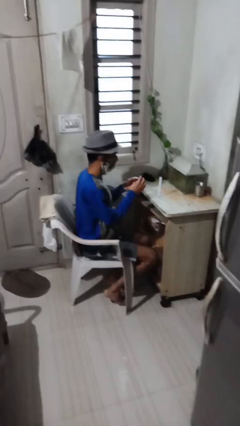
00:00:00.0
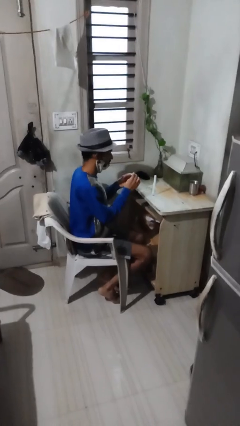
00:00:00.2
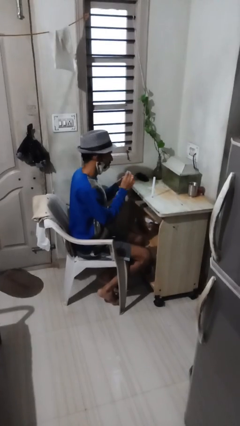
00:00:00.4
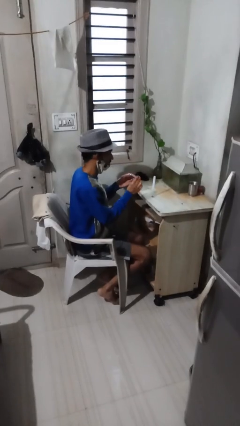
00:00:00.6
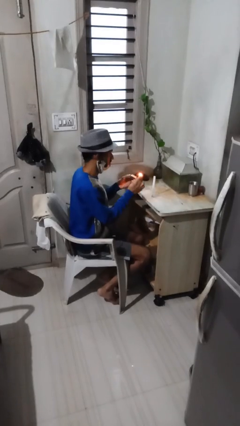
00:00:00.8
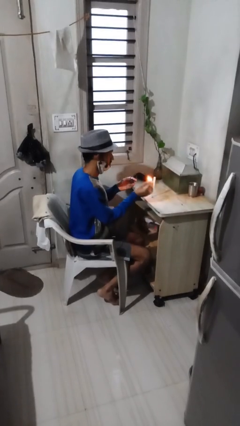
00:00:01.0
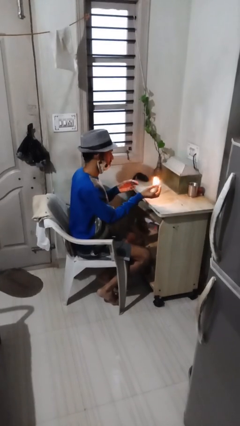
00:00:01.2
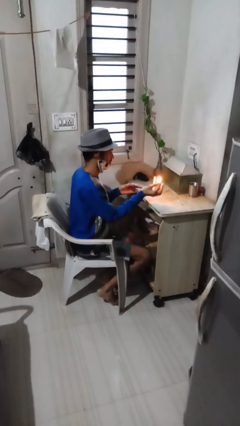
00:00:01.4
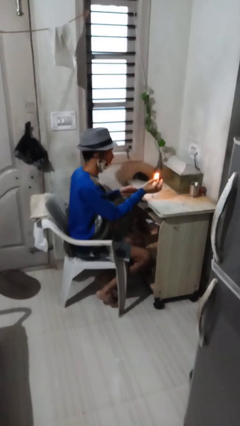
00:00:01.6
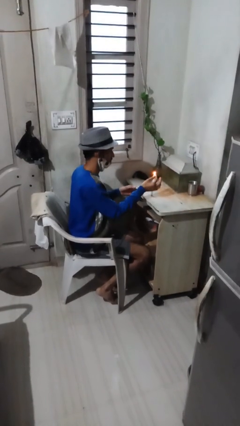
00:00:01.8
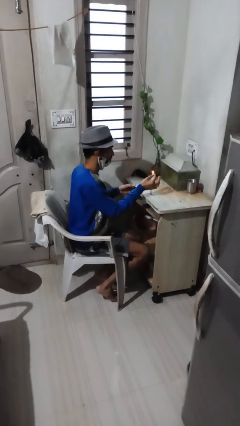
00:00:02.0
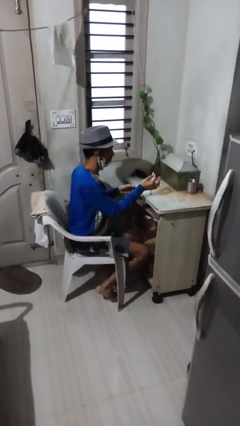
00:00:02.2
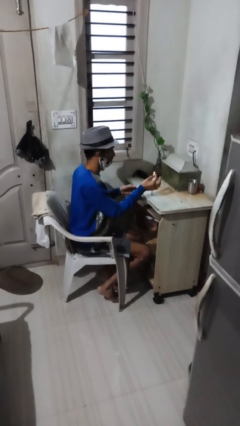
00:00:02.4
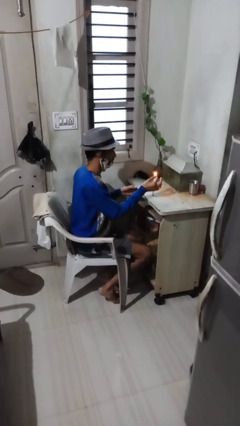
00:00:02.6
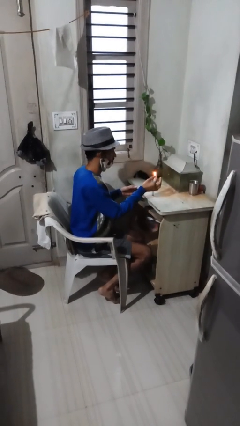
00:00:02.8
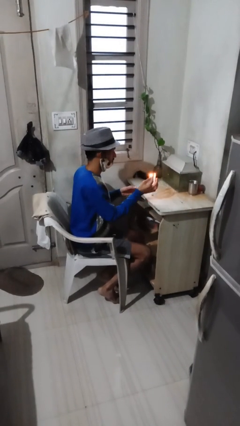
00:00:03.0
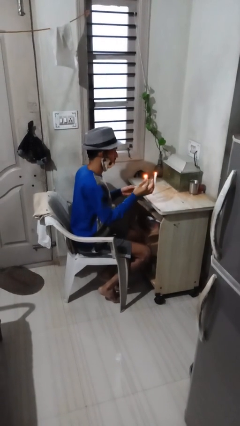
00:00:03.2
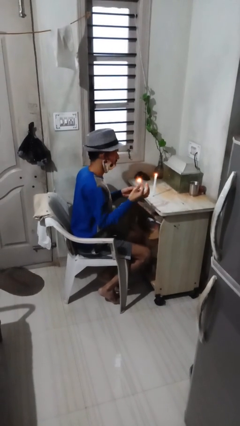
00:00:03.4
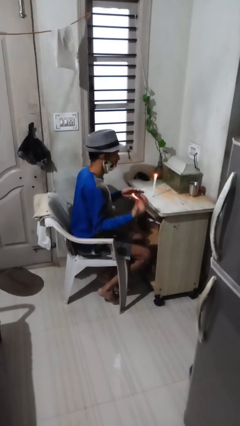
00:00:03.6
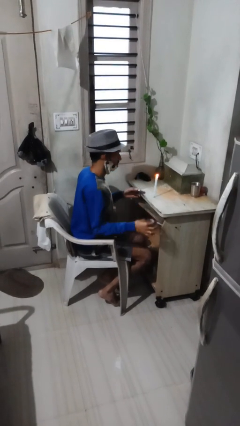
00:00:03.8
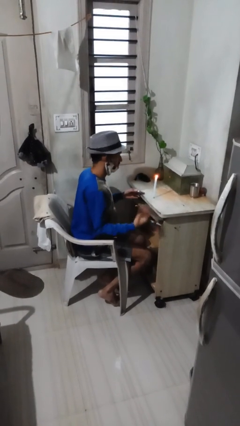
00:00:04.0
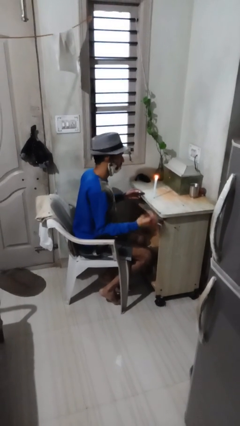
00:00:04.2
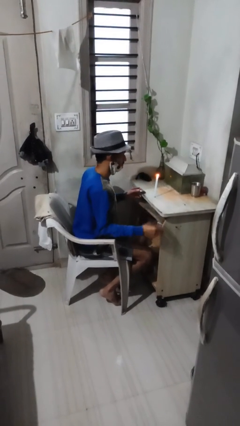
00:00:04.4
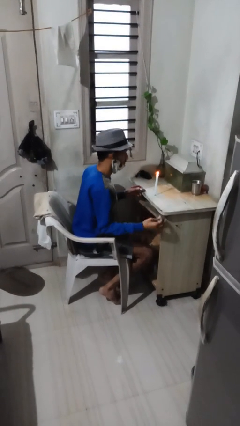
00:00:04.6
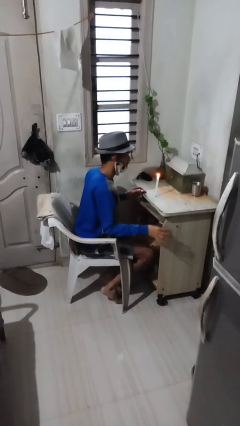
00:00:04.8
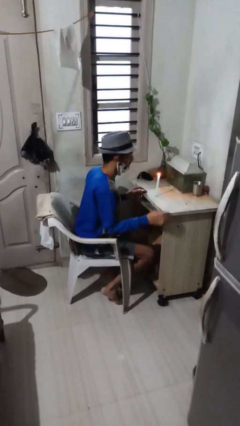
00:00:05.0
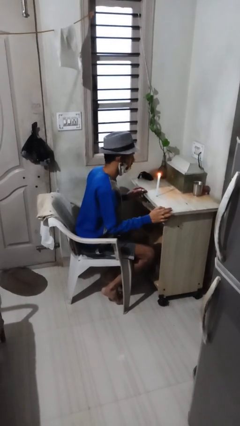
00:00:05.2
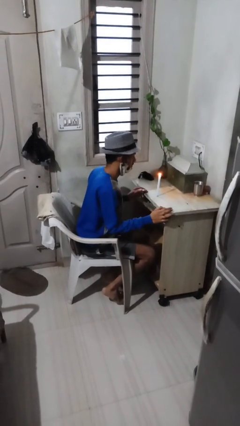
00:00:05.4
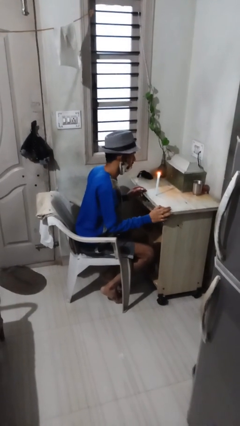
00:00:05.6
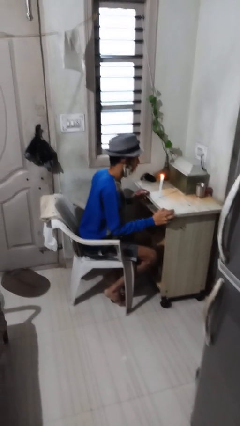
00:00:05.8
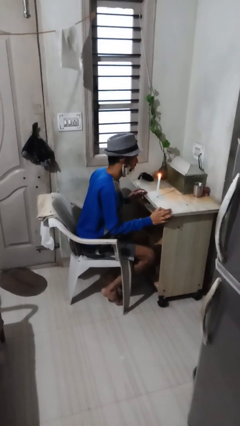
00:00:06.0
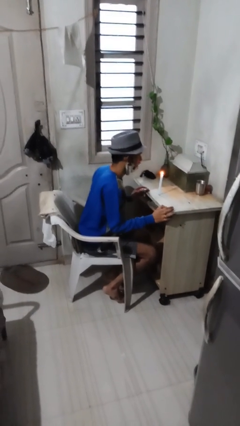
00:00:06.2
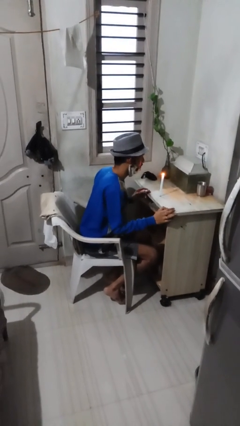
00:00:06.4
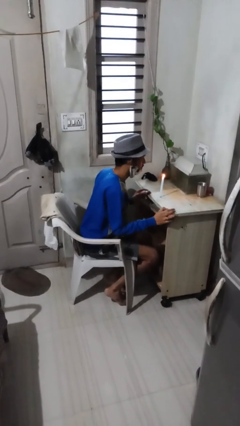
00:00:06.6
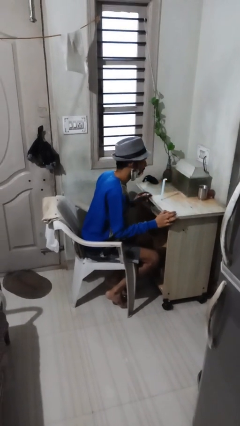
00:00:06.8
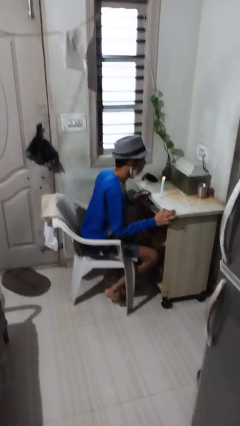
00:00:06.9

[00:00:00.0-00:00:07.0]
person lights candle

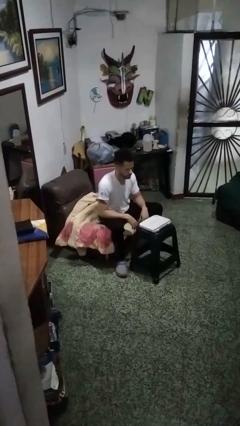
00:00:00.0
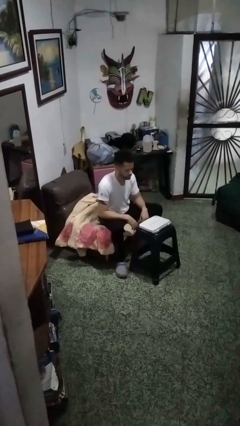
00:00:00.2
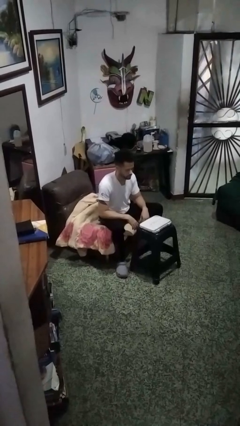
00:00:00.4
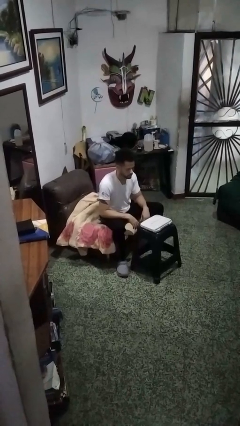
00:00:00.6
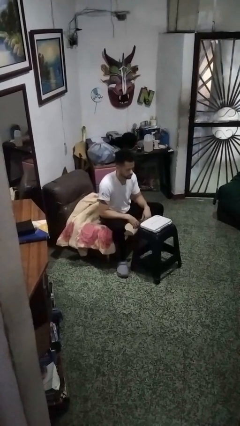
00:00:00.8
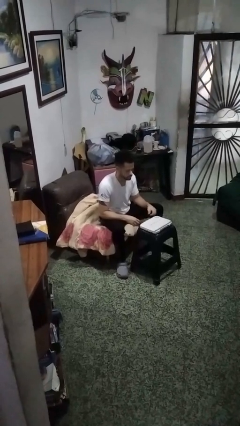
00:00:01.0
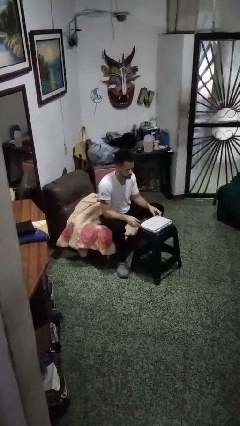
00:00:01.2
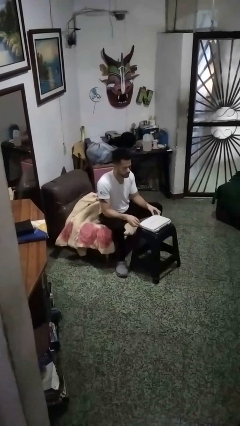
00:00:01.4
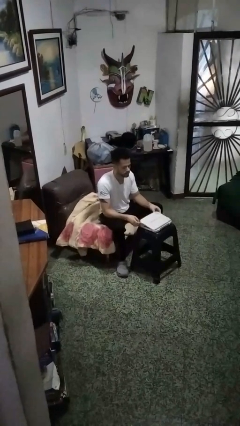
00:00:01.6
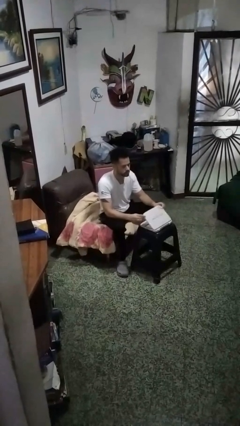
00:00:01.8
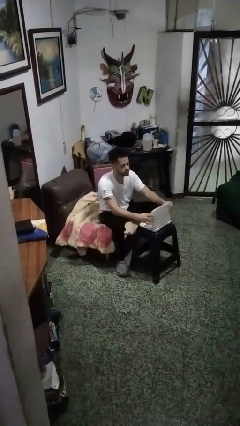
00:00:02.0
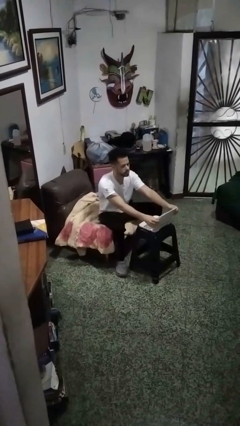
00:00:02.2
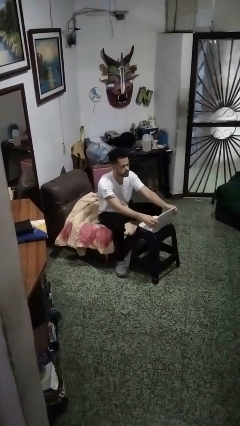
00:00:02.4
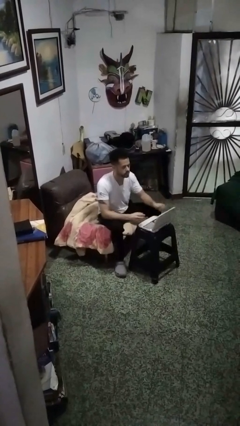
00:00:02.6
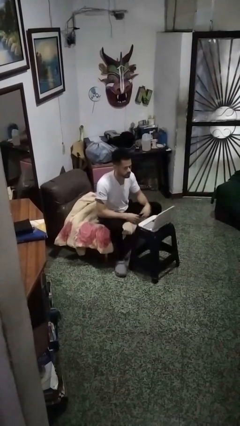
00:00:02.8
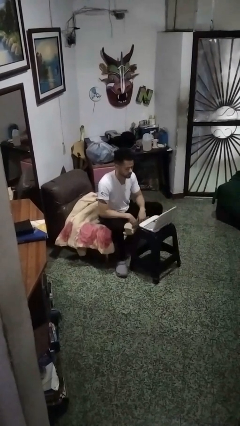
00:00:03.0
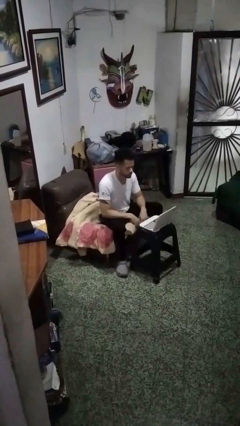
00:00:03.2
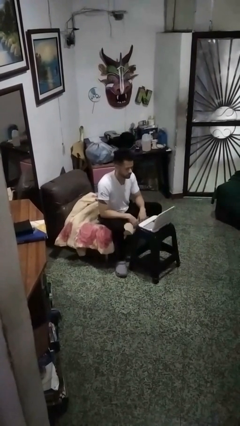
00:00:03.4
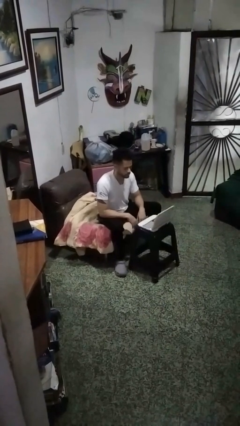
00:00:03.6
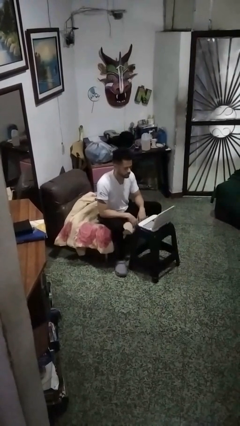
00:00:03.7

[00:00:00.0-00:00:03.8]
person opens laptop

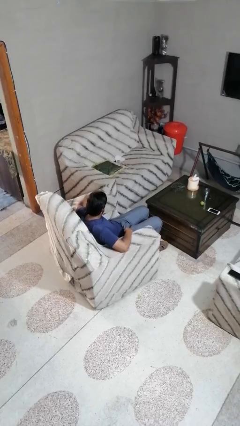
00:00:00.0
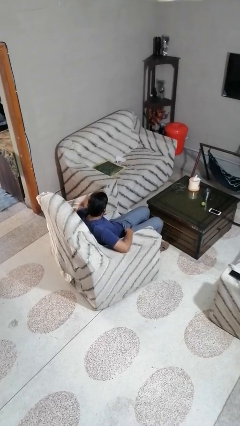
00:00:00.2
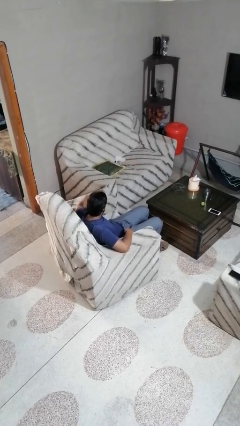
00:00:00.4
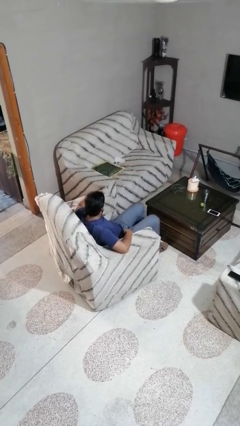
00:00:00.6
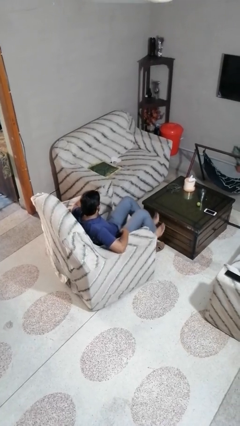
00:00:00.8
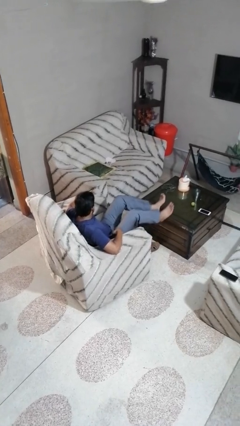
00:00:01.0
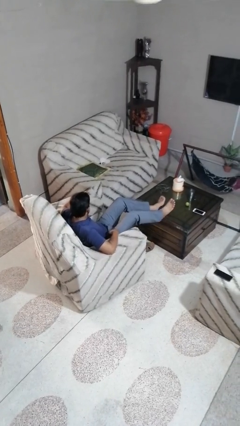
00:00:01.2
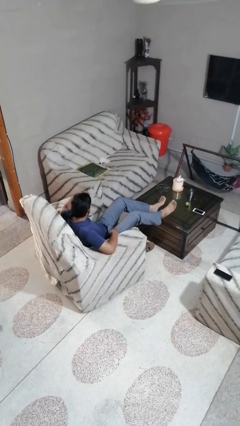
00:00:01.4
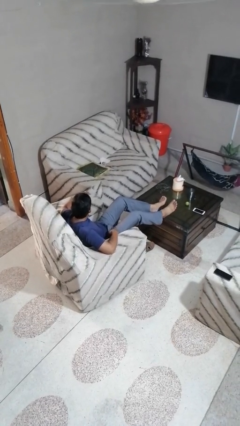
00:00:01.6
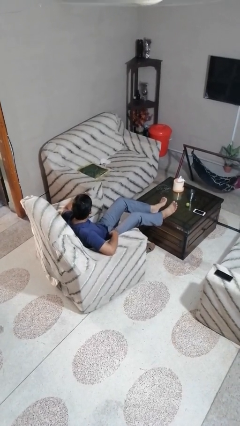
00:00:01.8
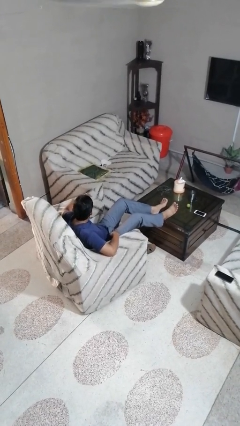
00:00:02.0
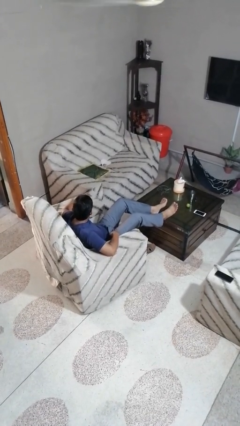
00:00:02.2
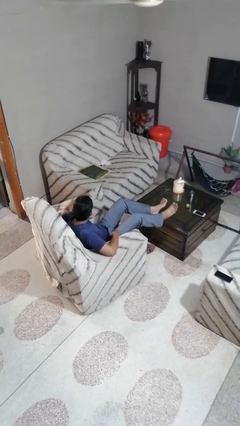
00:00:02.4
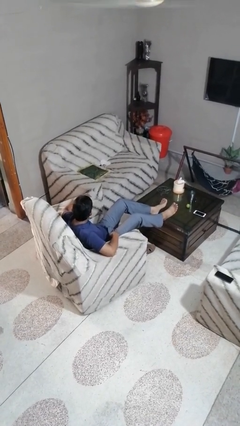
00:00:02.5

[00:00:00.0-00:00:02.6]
person puts feet up

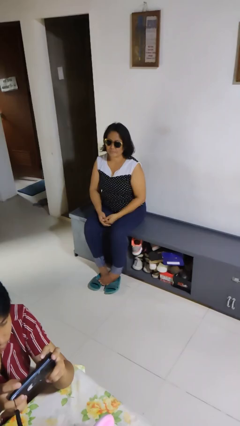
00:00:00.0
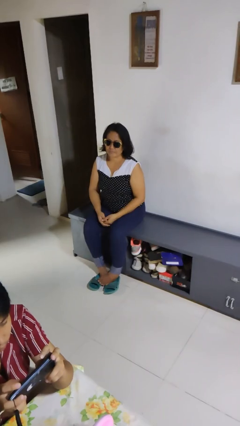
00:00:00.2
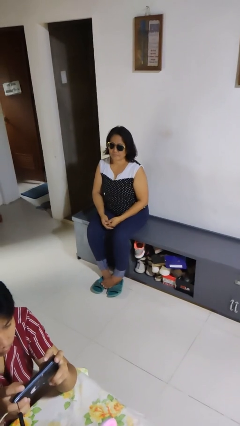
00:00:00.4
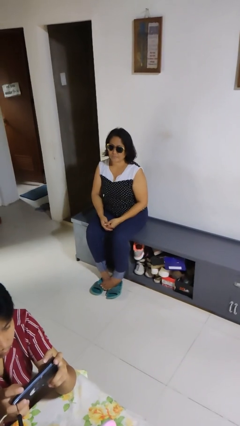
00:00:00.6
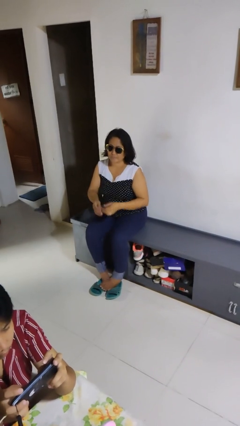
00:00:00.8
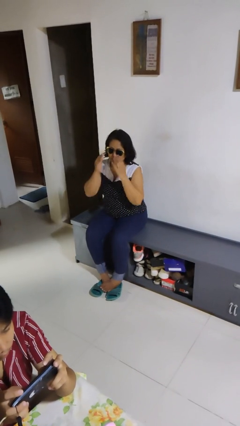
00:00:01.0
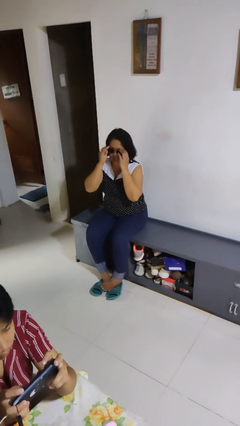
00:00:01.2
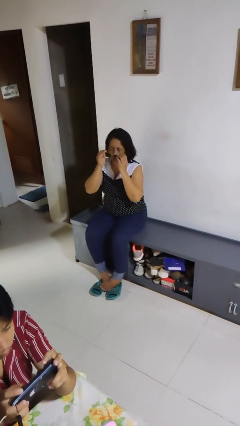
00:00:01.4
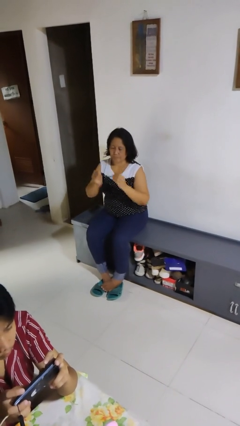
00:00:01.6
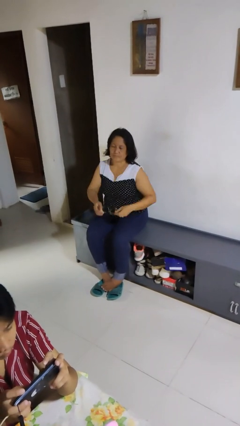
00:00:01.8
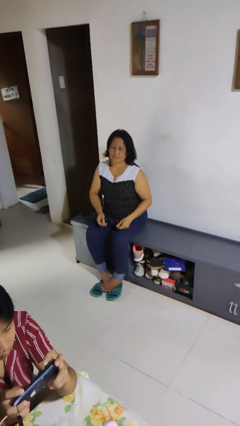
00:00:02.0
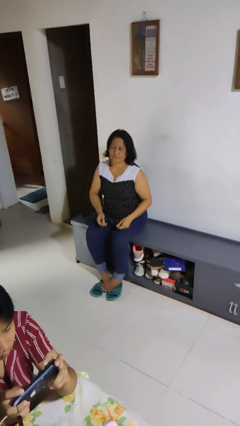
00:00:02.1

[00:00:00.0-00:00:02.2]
person takes off sunglasses

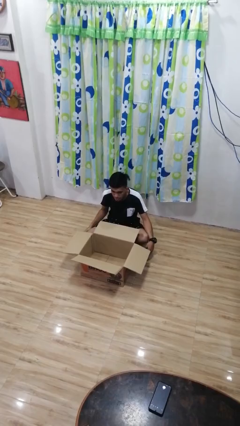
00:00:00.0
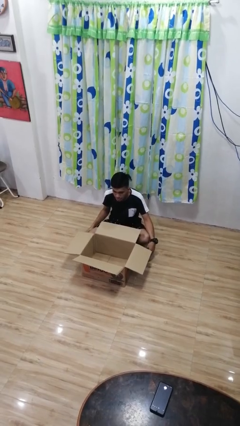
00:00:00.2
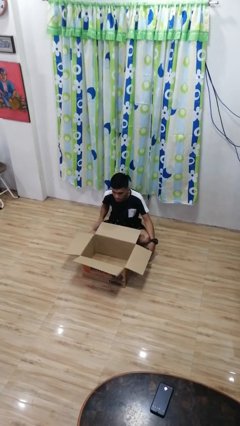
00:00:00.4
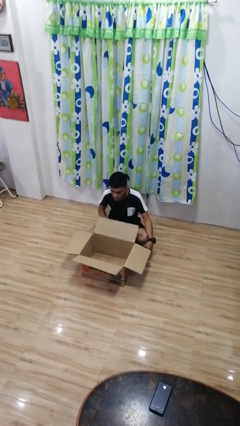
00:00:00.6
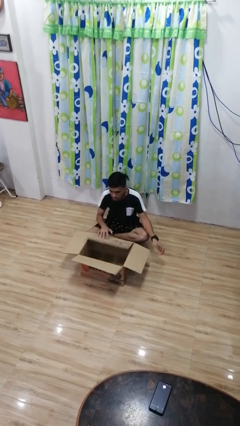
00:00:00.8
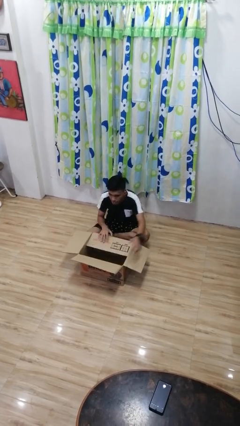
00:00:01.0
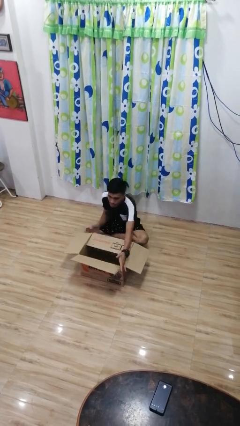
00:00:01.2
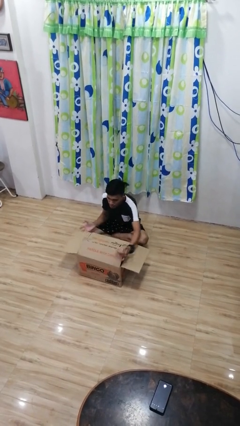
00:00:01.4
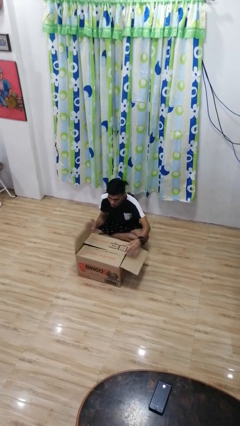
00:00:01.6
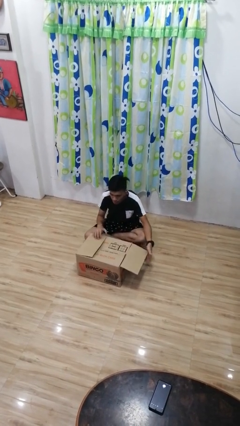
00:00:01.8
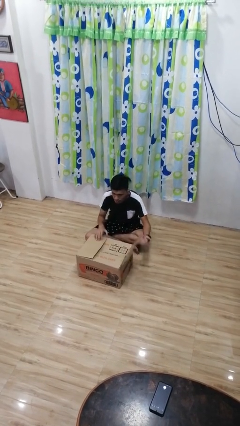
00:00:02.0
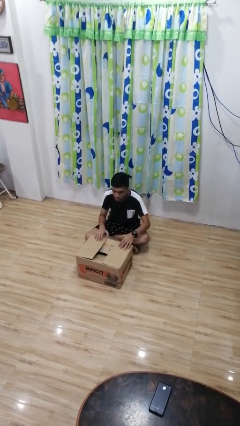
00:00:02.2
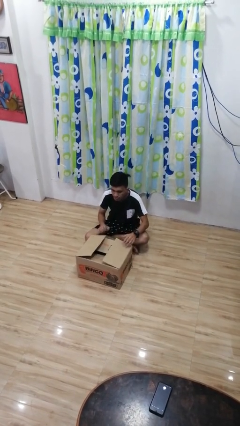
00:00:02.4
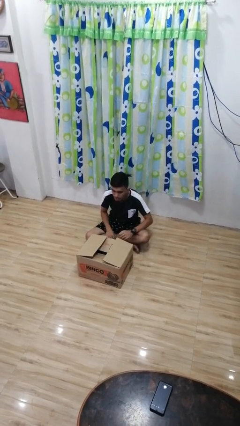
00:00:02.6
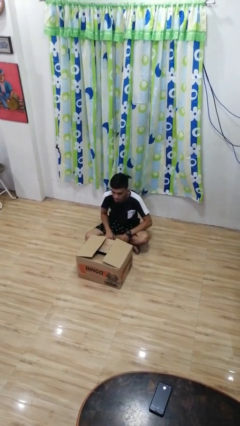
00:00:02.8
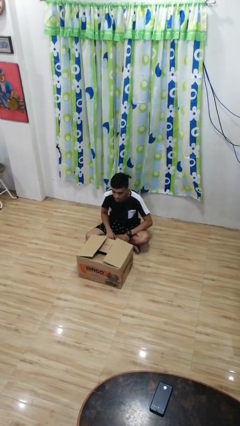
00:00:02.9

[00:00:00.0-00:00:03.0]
person closes box
